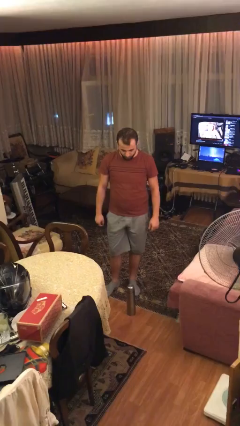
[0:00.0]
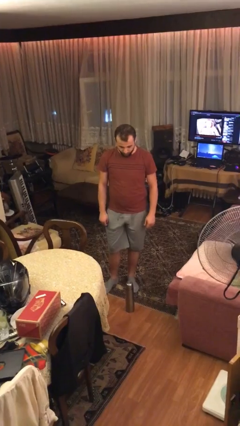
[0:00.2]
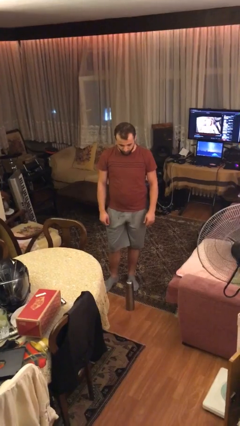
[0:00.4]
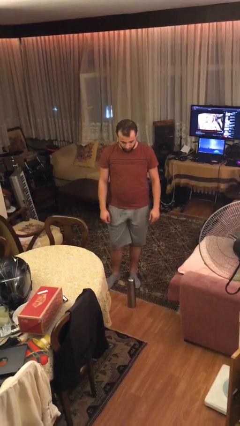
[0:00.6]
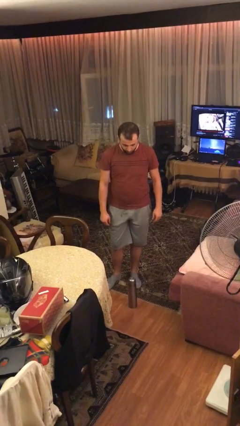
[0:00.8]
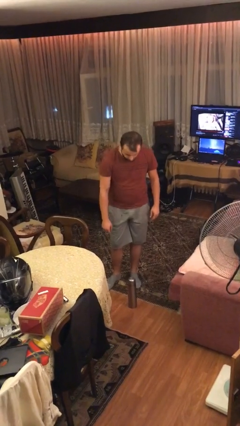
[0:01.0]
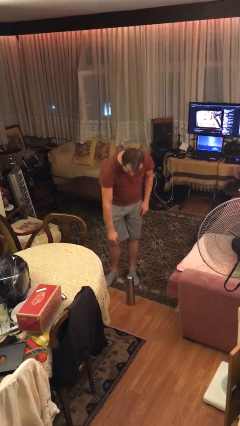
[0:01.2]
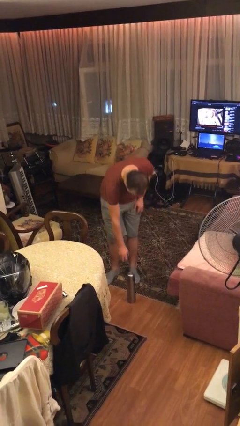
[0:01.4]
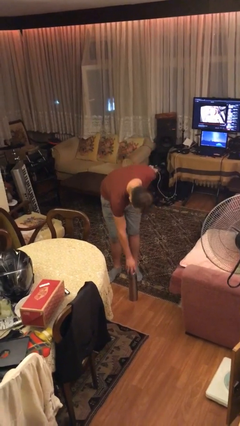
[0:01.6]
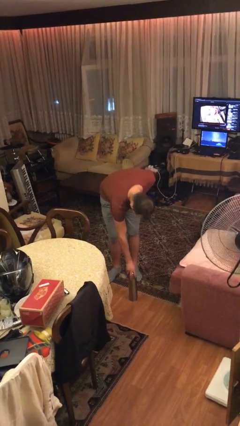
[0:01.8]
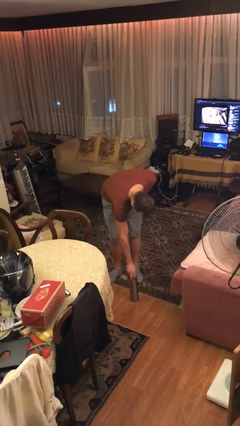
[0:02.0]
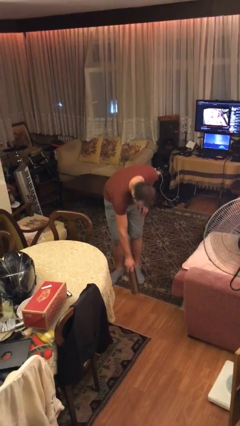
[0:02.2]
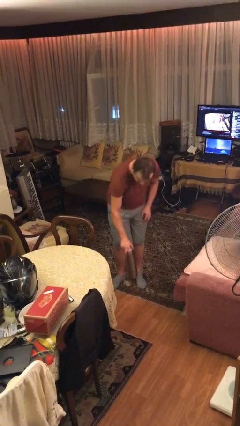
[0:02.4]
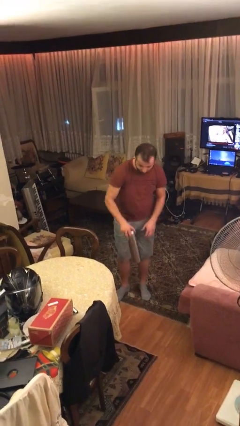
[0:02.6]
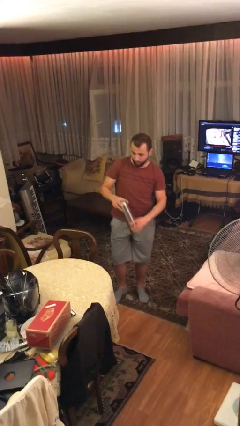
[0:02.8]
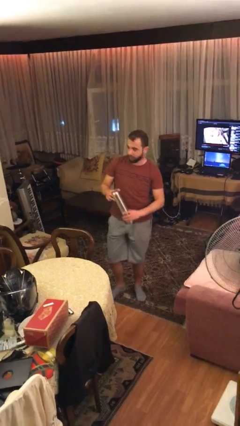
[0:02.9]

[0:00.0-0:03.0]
person picks up object from floor

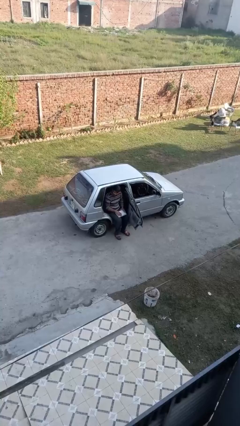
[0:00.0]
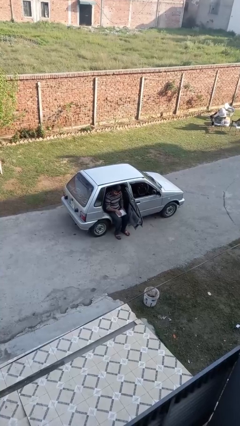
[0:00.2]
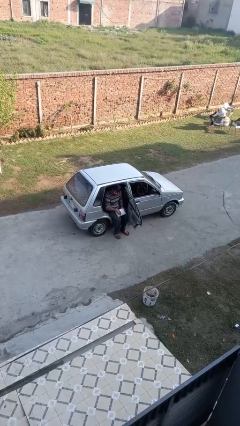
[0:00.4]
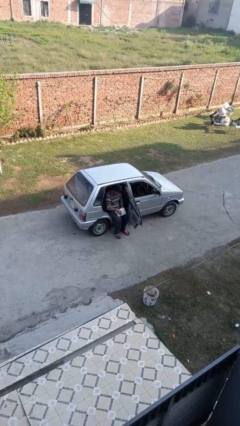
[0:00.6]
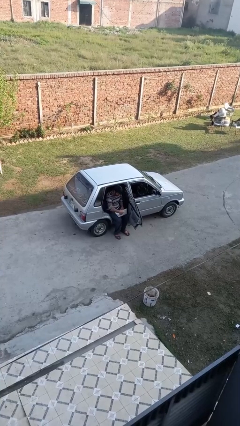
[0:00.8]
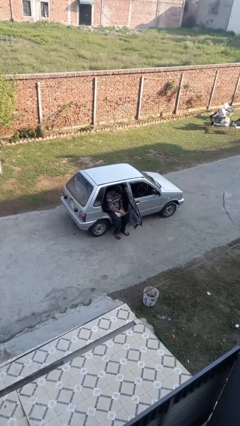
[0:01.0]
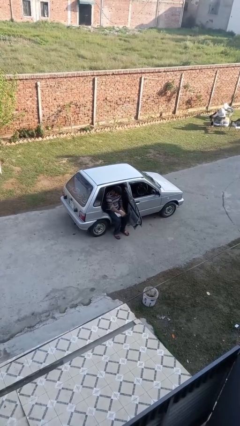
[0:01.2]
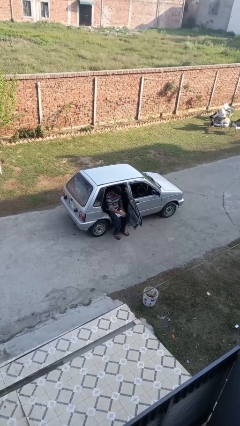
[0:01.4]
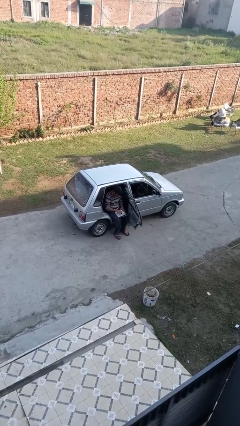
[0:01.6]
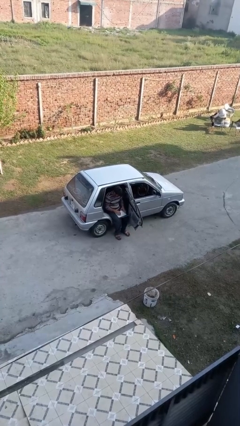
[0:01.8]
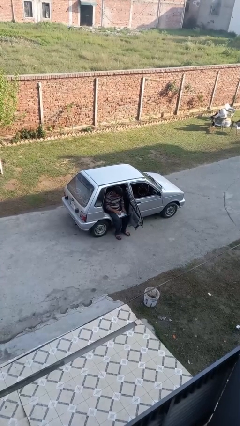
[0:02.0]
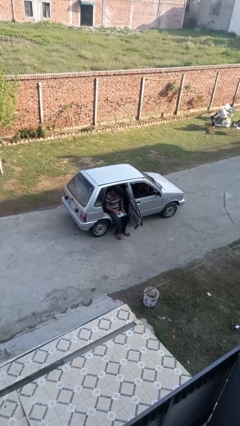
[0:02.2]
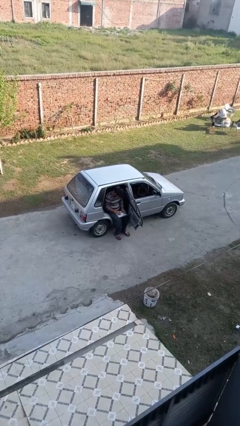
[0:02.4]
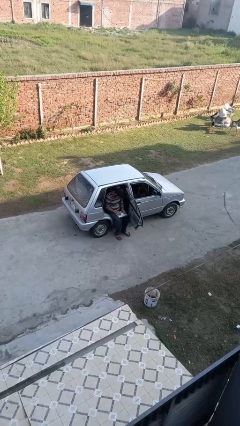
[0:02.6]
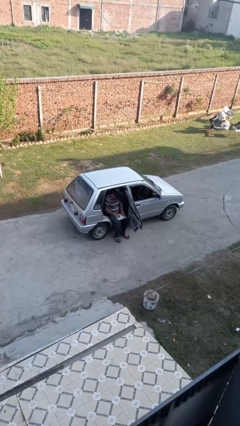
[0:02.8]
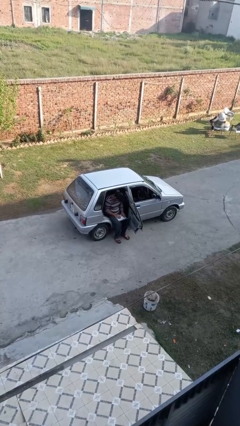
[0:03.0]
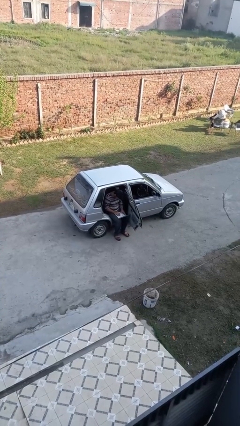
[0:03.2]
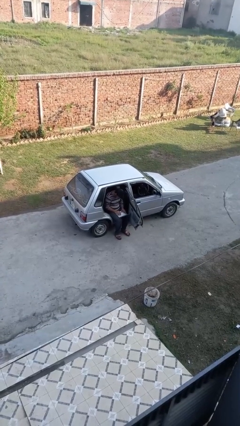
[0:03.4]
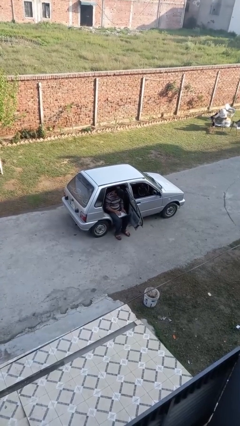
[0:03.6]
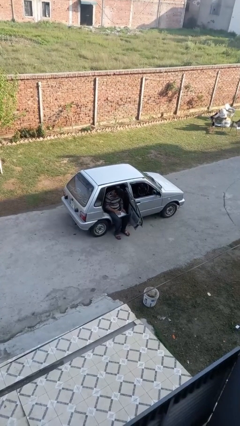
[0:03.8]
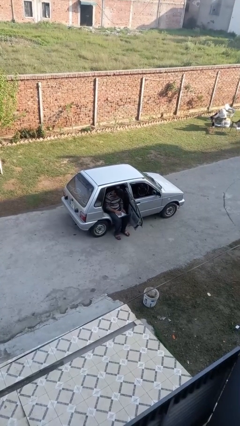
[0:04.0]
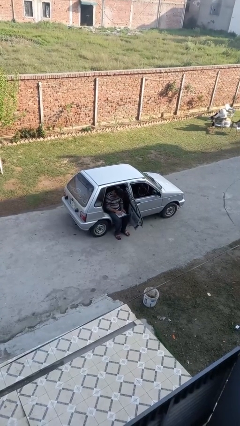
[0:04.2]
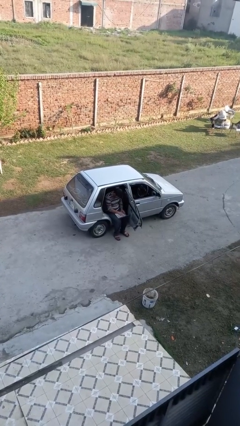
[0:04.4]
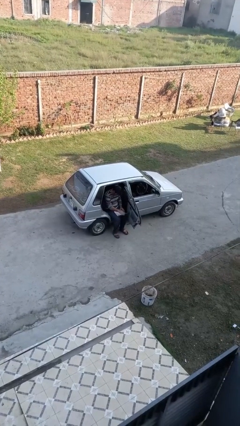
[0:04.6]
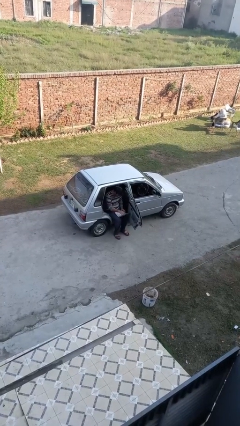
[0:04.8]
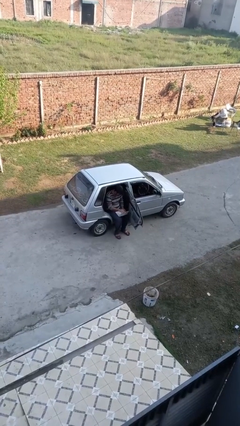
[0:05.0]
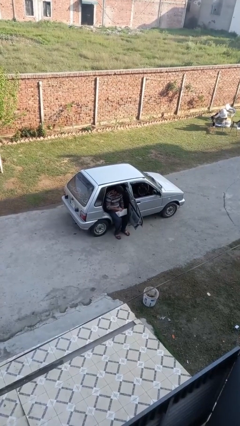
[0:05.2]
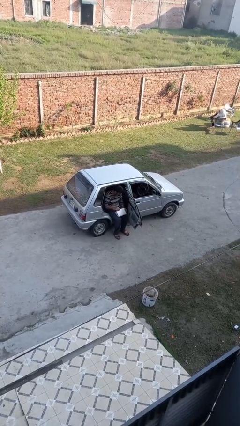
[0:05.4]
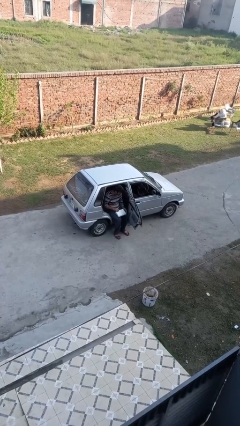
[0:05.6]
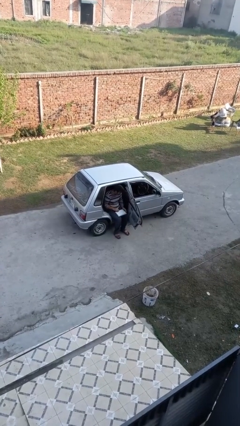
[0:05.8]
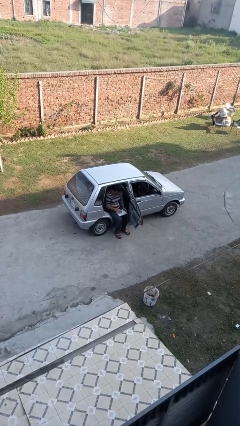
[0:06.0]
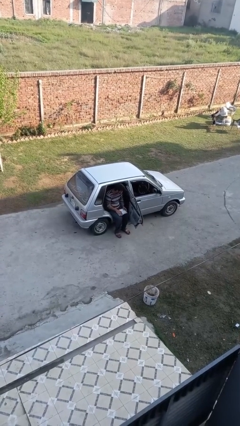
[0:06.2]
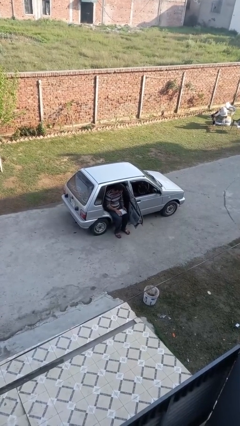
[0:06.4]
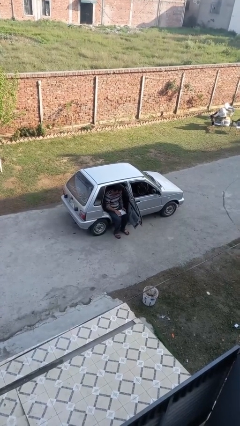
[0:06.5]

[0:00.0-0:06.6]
person interacts with laptop

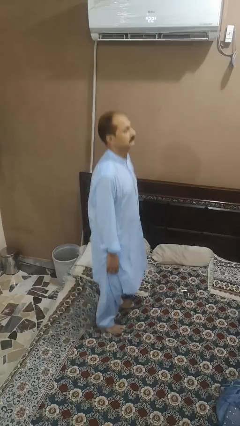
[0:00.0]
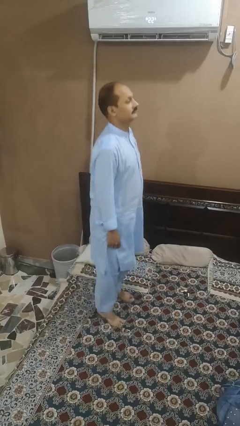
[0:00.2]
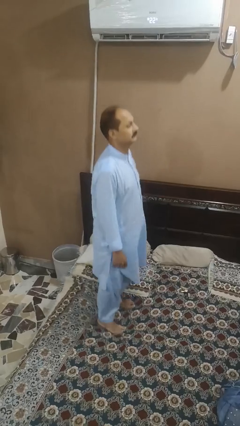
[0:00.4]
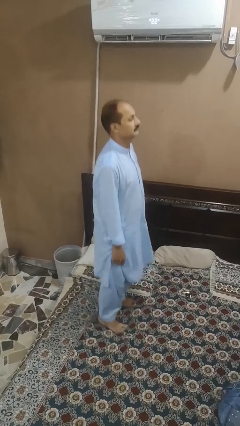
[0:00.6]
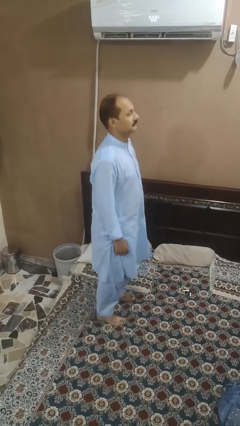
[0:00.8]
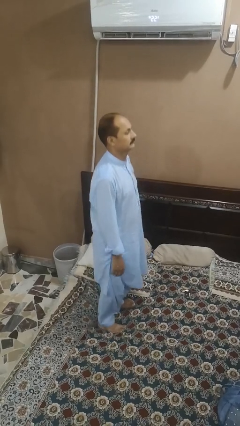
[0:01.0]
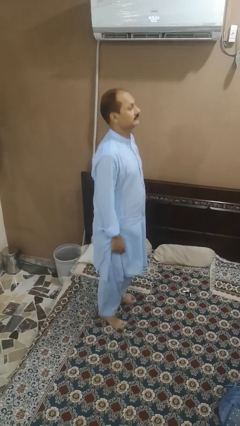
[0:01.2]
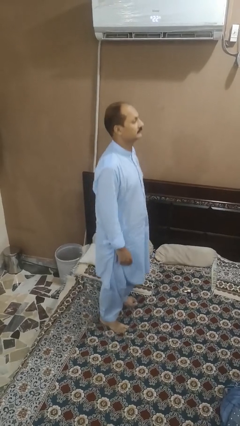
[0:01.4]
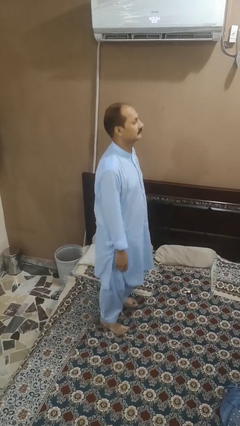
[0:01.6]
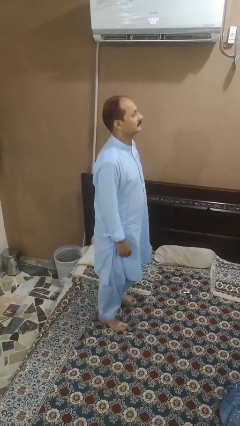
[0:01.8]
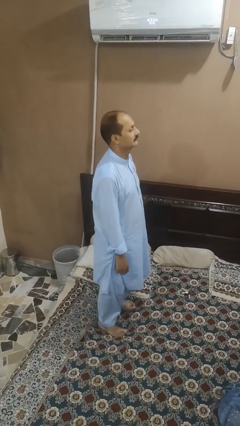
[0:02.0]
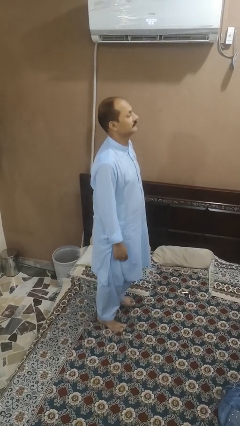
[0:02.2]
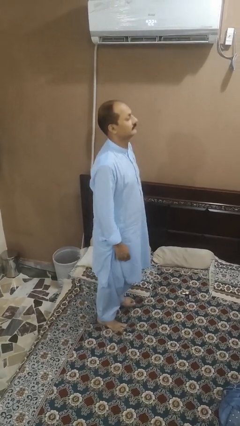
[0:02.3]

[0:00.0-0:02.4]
person jumps on bed

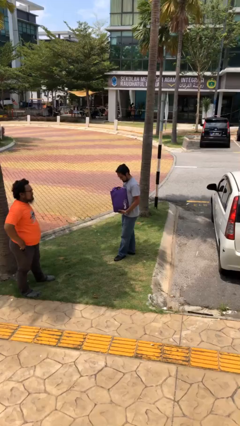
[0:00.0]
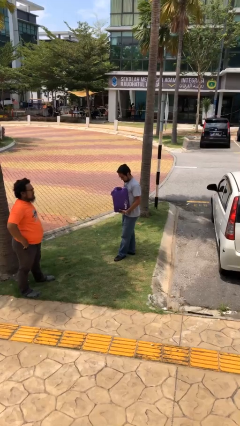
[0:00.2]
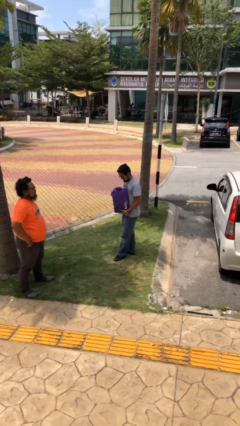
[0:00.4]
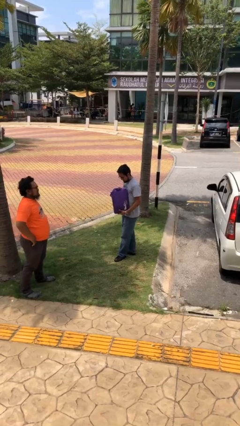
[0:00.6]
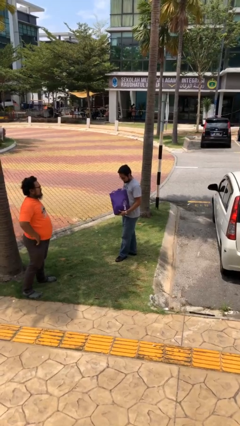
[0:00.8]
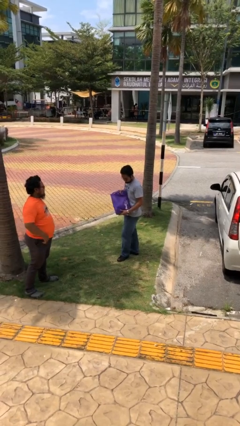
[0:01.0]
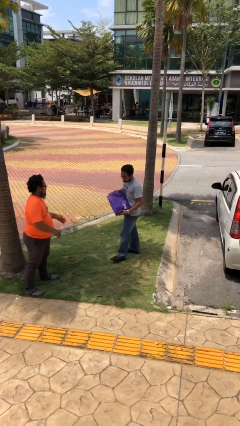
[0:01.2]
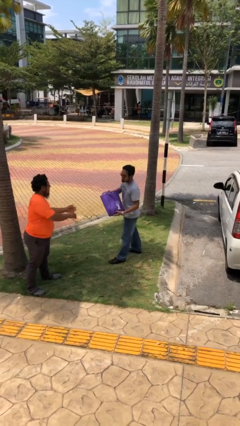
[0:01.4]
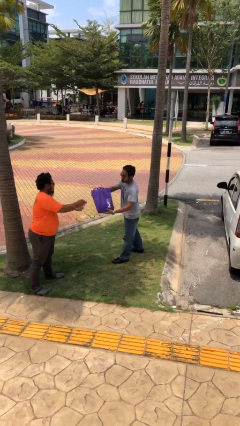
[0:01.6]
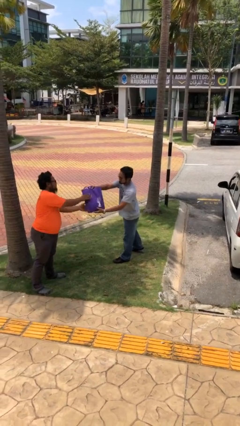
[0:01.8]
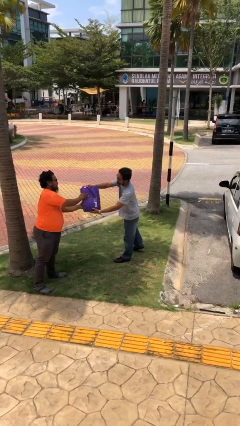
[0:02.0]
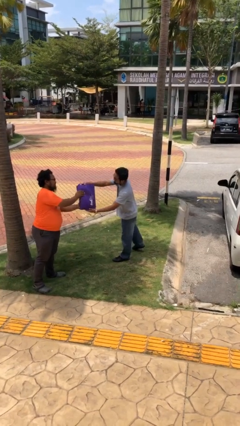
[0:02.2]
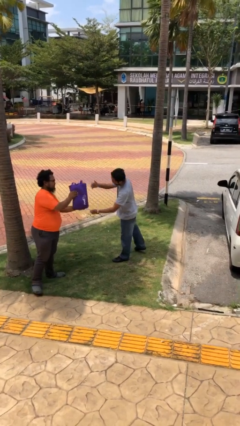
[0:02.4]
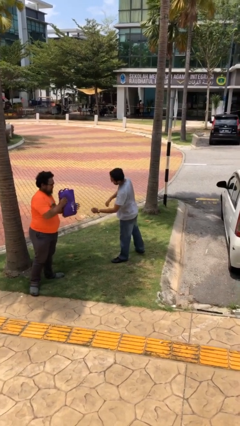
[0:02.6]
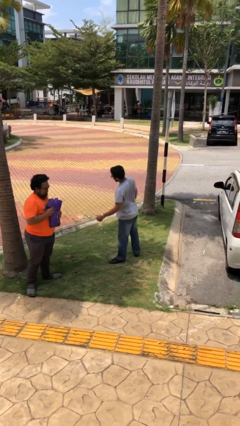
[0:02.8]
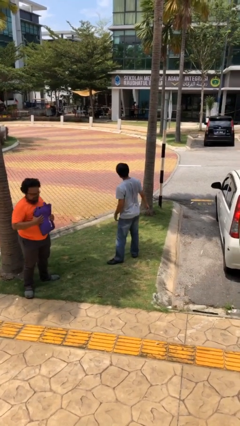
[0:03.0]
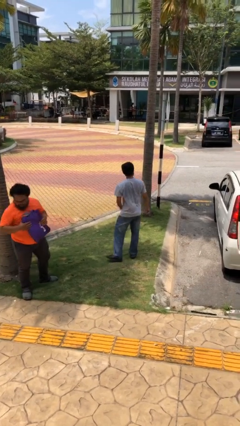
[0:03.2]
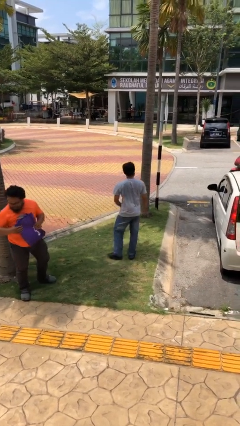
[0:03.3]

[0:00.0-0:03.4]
person transfers object to person

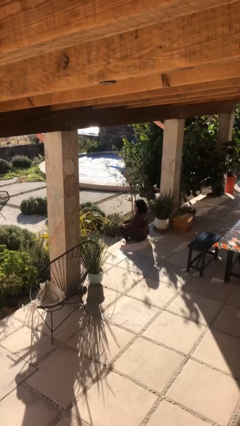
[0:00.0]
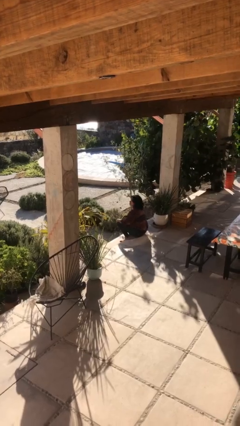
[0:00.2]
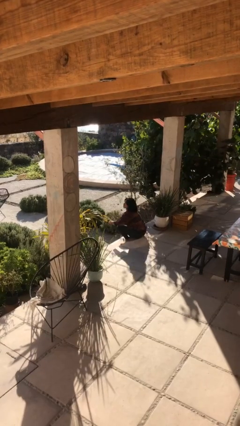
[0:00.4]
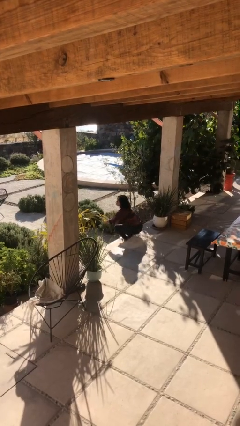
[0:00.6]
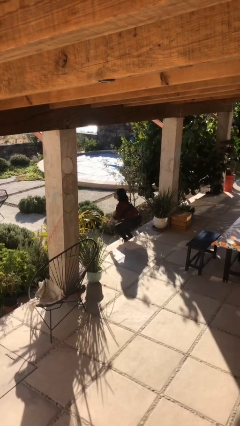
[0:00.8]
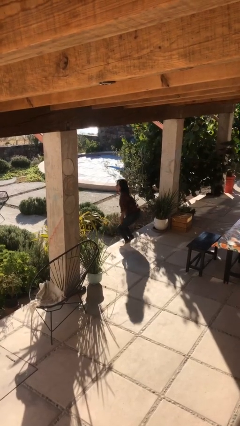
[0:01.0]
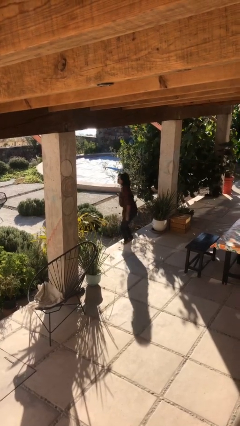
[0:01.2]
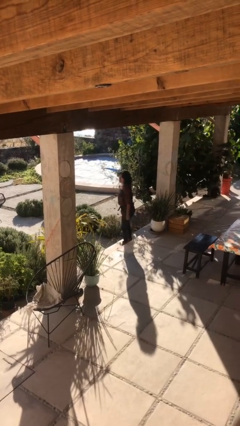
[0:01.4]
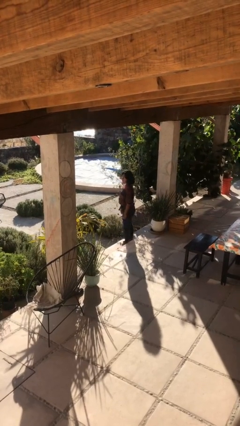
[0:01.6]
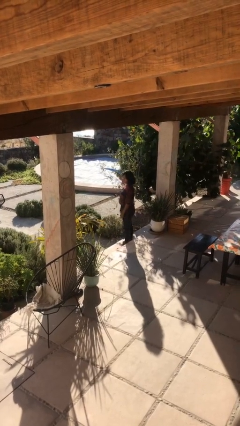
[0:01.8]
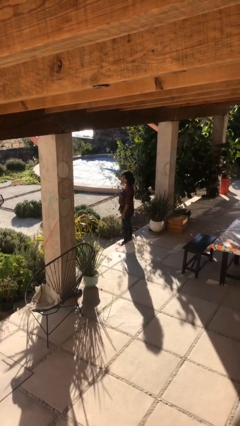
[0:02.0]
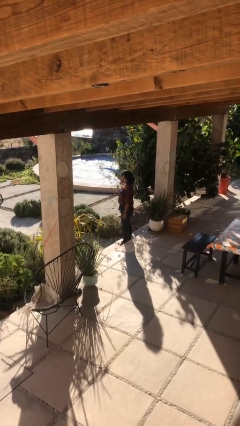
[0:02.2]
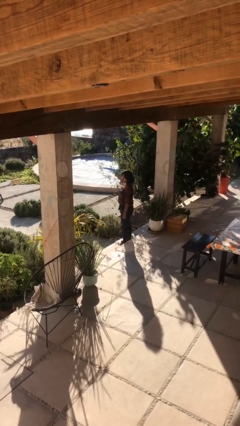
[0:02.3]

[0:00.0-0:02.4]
person stands up
